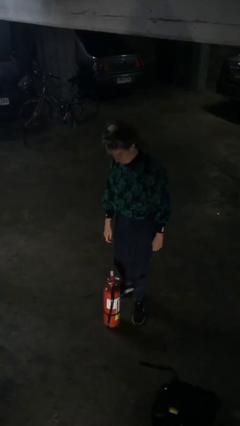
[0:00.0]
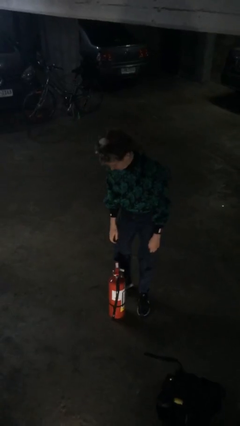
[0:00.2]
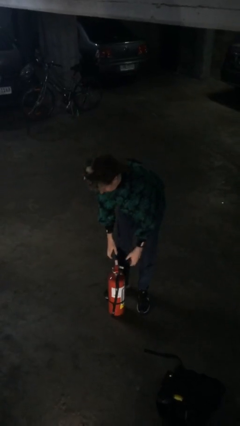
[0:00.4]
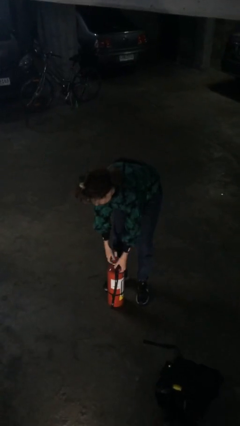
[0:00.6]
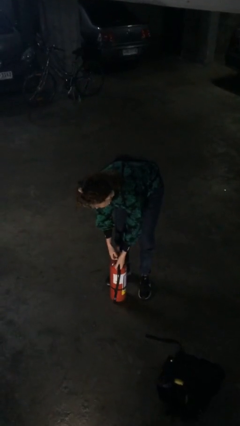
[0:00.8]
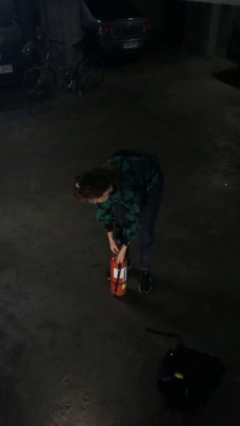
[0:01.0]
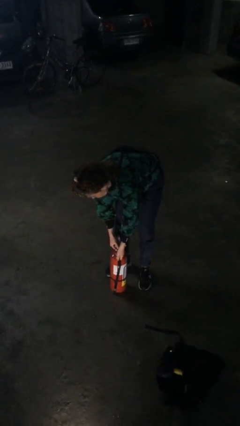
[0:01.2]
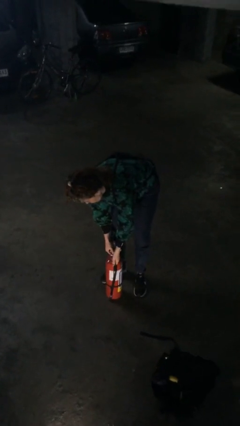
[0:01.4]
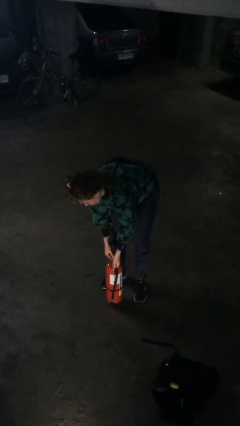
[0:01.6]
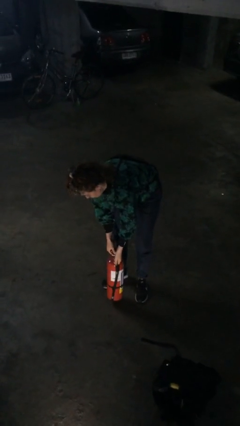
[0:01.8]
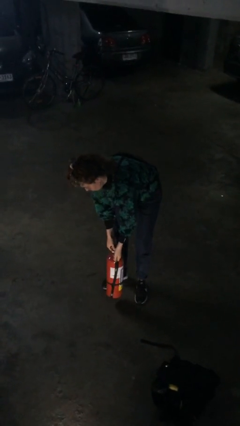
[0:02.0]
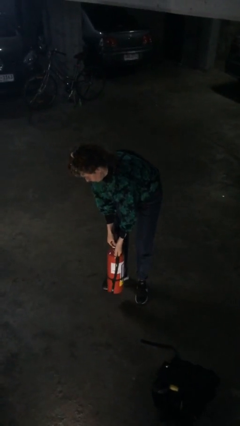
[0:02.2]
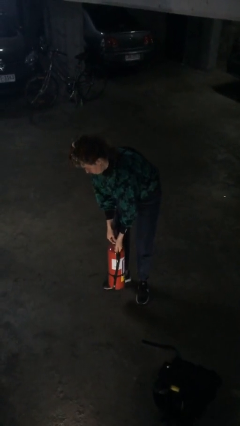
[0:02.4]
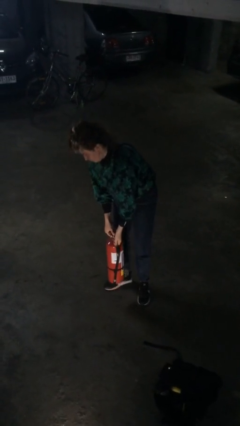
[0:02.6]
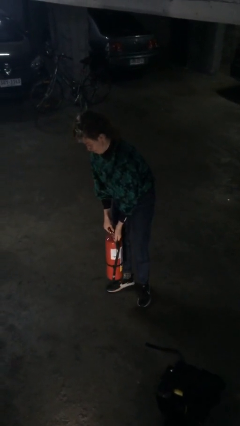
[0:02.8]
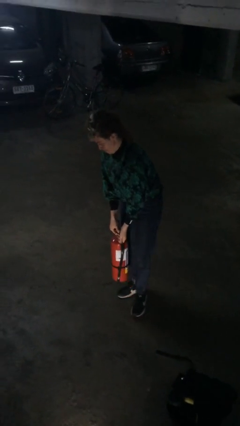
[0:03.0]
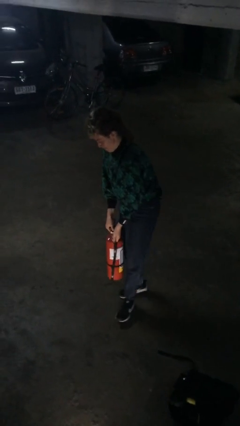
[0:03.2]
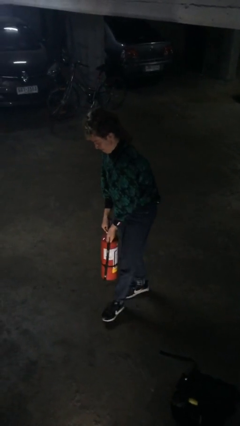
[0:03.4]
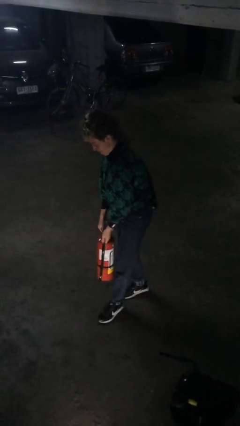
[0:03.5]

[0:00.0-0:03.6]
person picks up object from floor

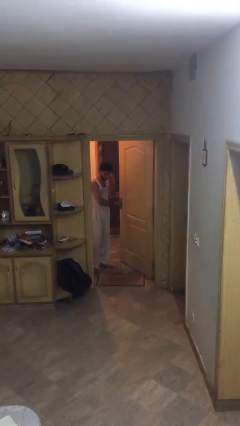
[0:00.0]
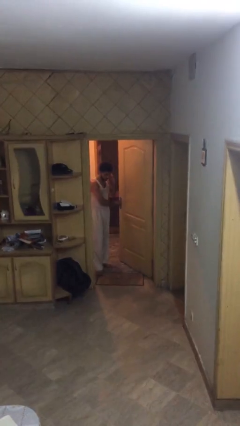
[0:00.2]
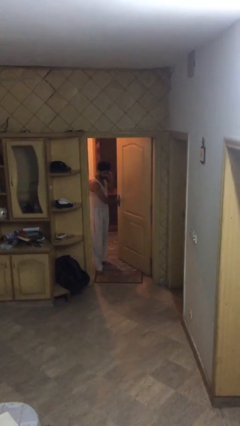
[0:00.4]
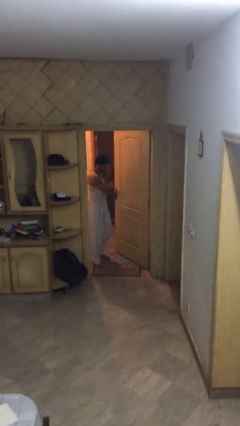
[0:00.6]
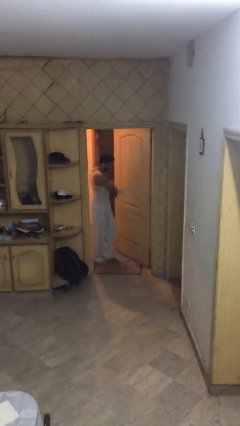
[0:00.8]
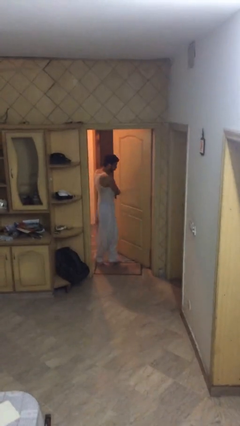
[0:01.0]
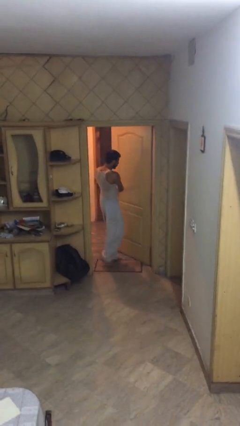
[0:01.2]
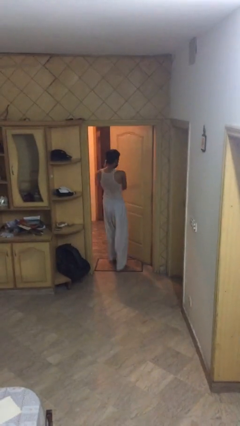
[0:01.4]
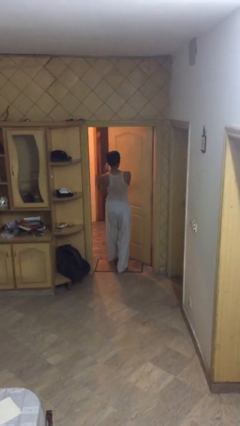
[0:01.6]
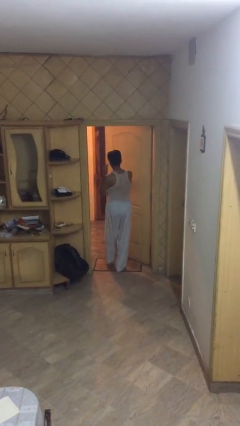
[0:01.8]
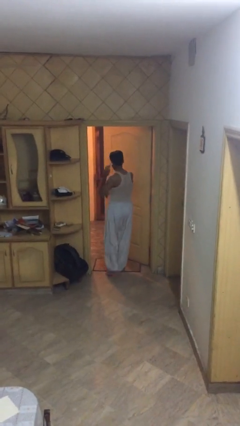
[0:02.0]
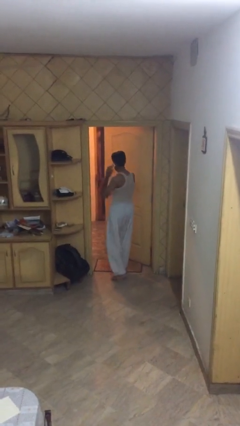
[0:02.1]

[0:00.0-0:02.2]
person enters scene through structure

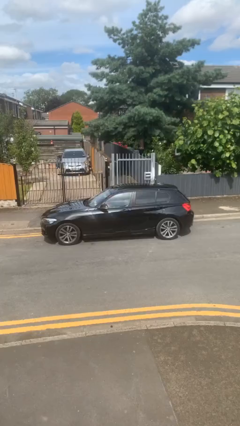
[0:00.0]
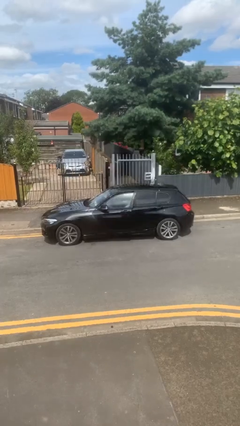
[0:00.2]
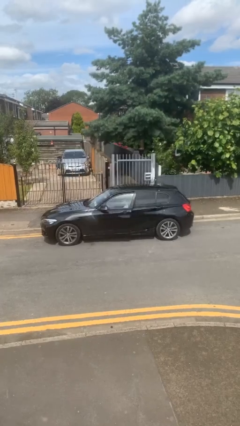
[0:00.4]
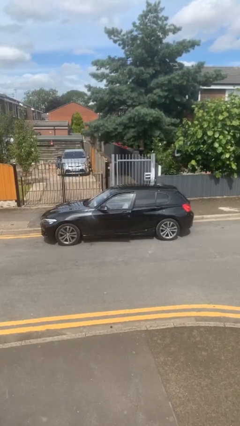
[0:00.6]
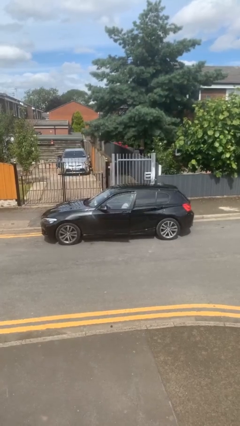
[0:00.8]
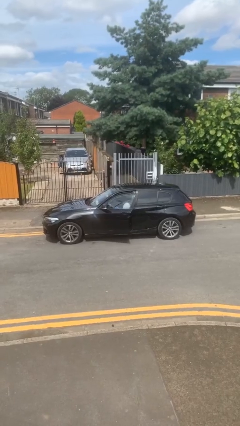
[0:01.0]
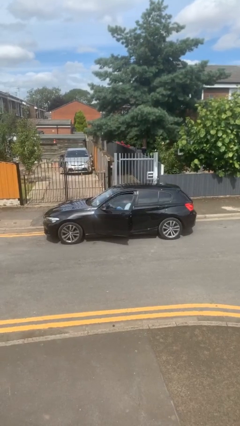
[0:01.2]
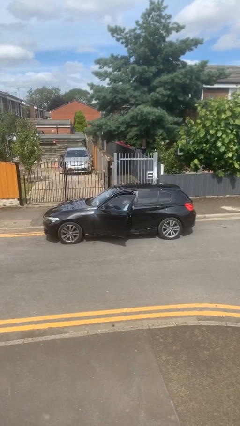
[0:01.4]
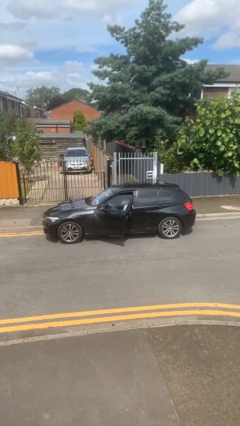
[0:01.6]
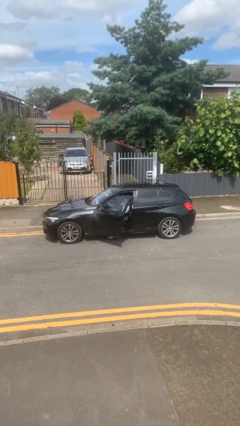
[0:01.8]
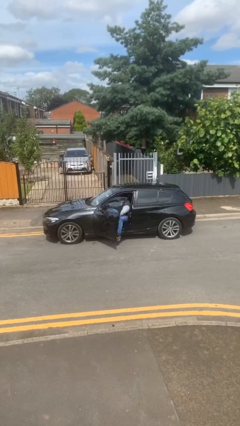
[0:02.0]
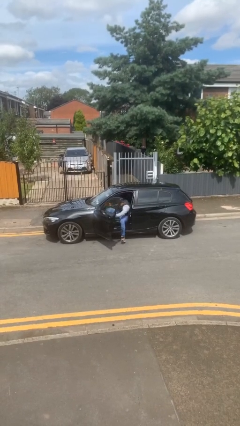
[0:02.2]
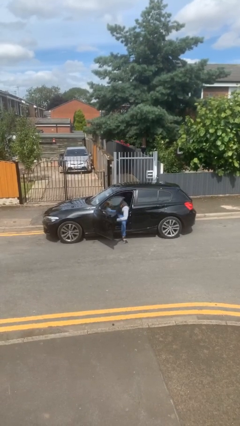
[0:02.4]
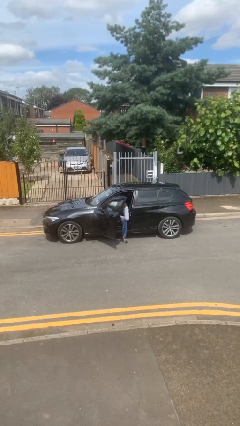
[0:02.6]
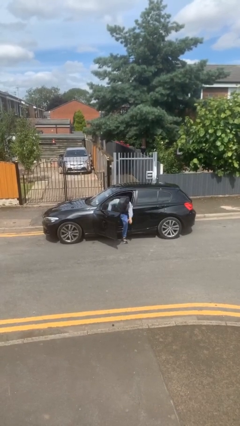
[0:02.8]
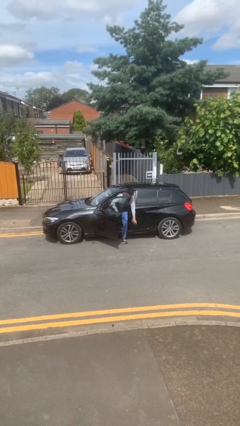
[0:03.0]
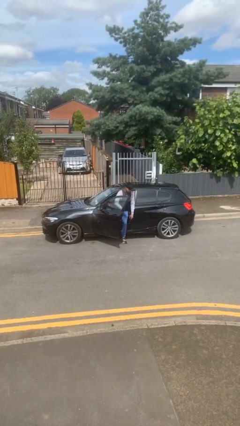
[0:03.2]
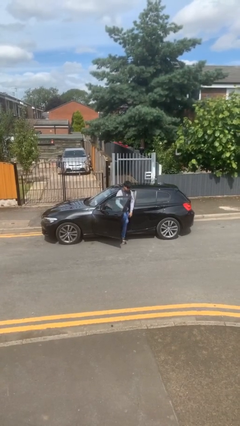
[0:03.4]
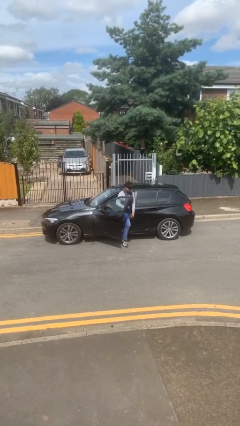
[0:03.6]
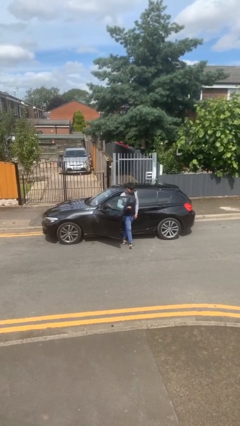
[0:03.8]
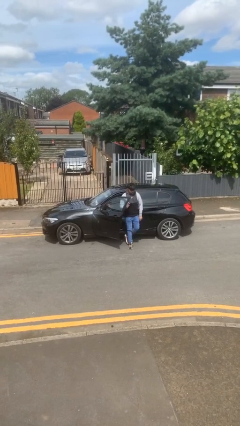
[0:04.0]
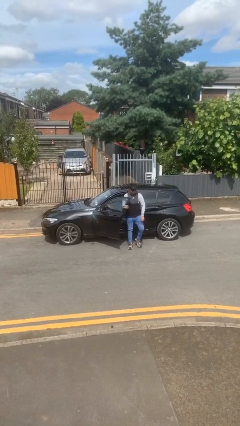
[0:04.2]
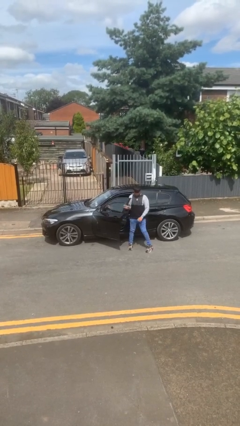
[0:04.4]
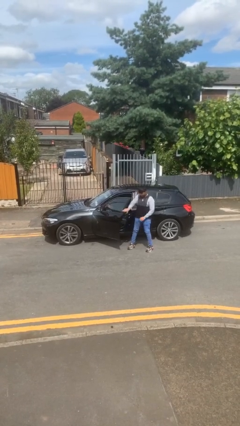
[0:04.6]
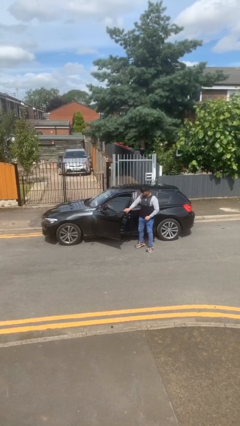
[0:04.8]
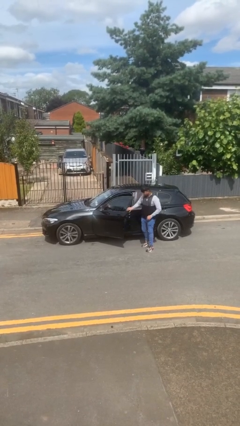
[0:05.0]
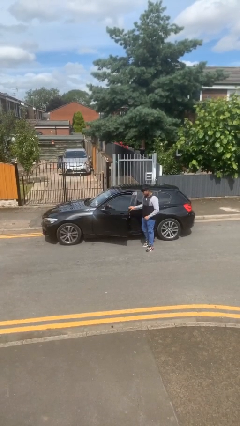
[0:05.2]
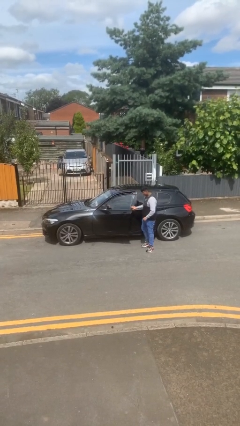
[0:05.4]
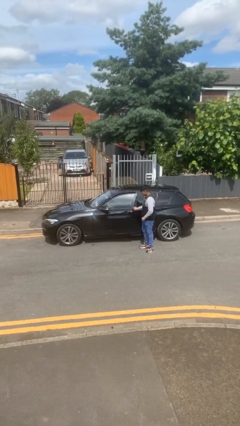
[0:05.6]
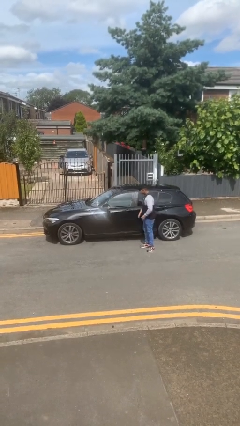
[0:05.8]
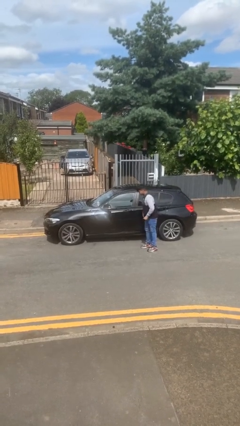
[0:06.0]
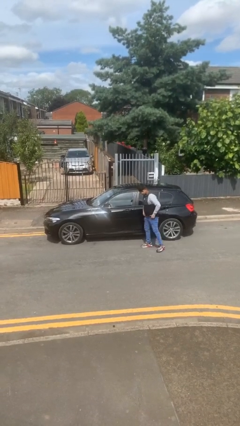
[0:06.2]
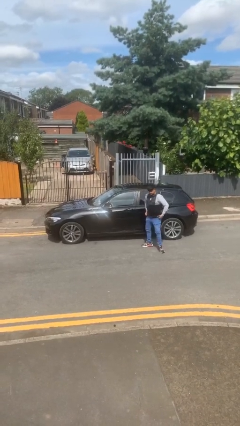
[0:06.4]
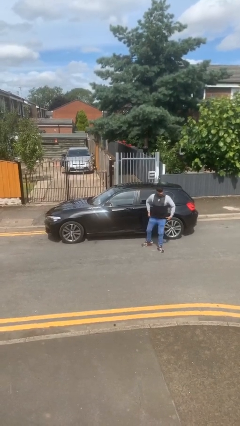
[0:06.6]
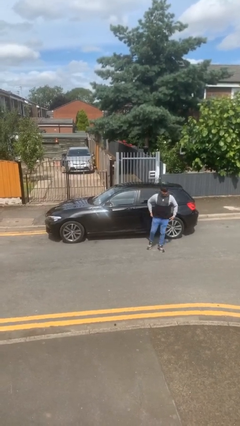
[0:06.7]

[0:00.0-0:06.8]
car drops off person

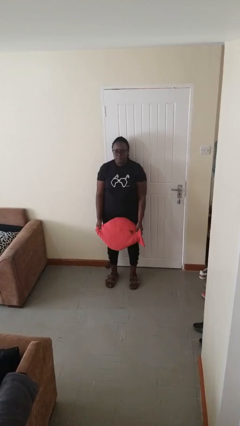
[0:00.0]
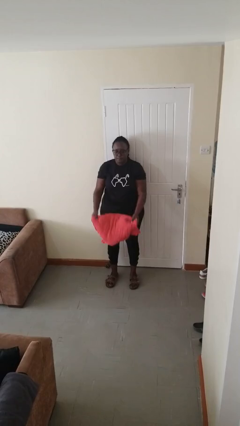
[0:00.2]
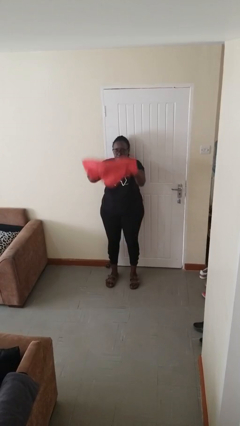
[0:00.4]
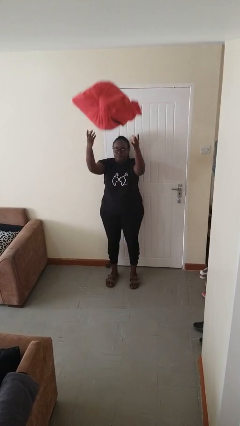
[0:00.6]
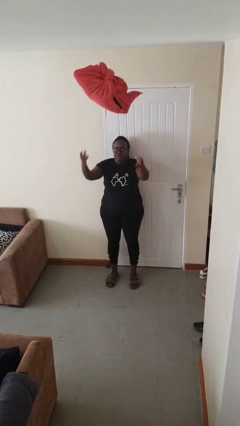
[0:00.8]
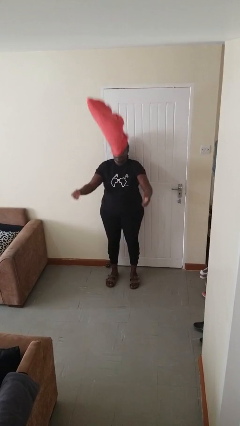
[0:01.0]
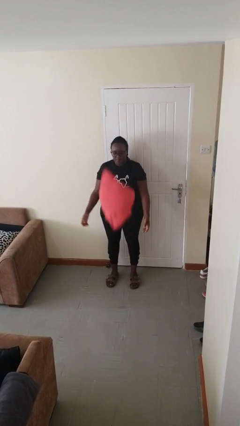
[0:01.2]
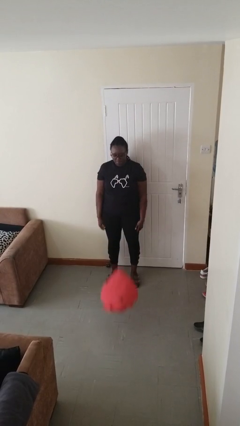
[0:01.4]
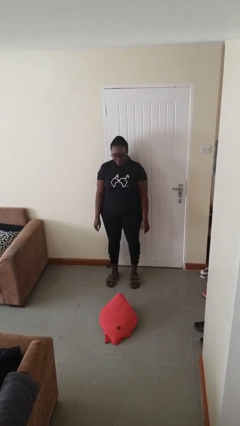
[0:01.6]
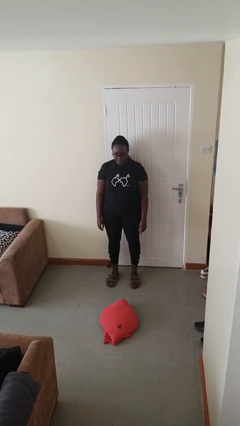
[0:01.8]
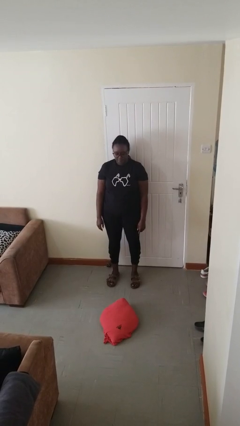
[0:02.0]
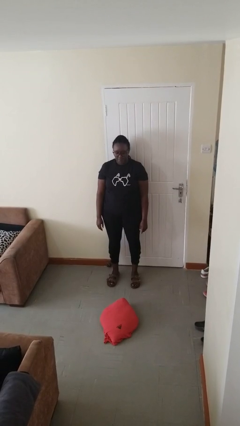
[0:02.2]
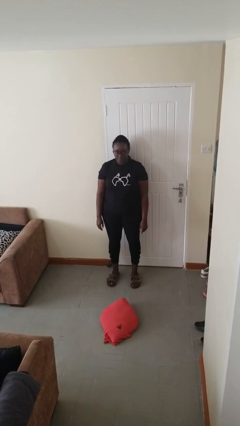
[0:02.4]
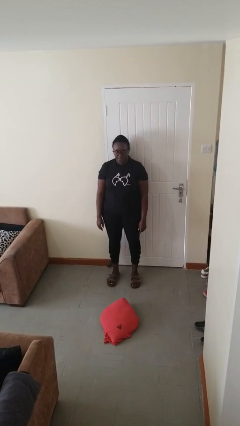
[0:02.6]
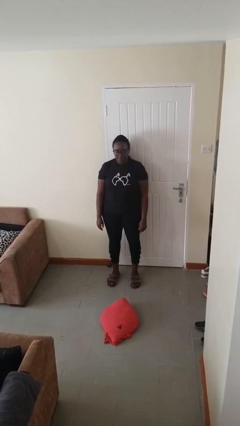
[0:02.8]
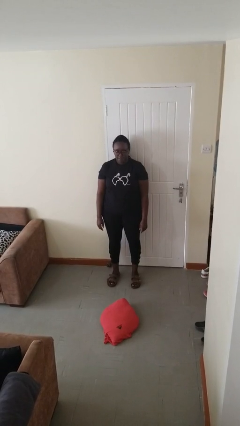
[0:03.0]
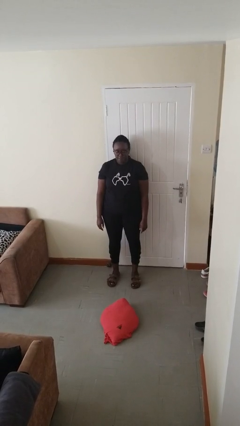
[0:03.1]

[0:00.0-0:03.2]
person throws object into air

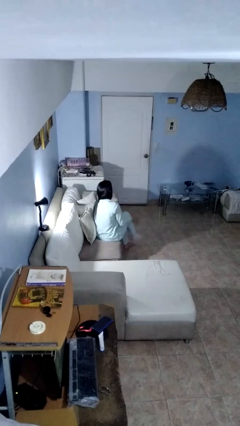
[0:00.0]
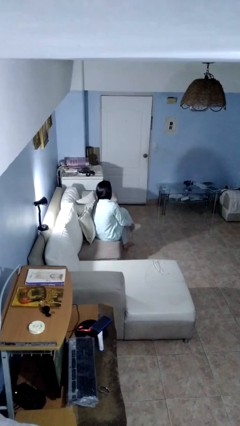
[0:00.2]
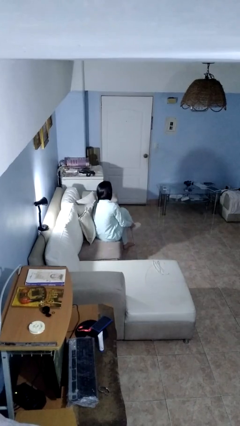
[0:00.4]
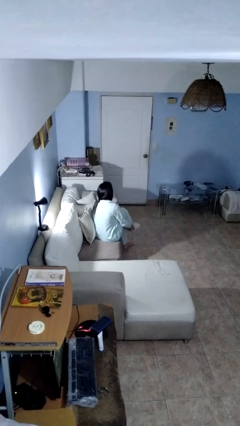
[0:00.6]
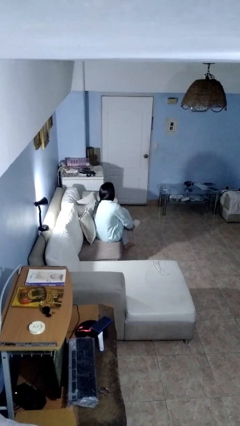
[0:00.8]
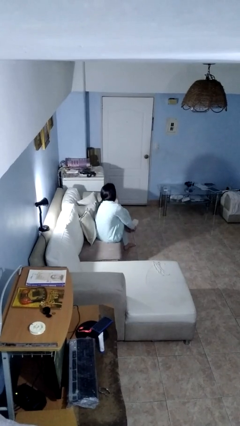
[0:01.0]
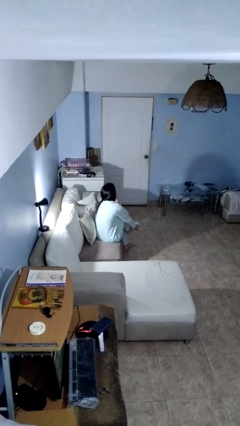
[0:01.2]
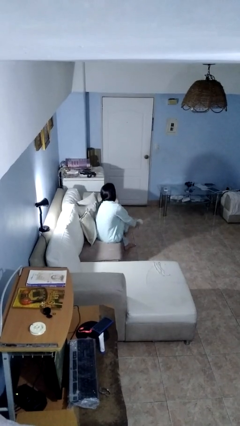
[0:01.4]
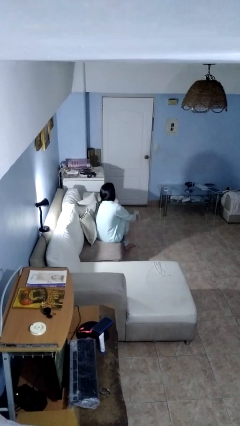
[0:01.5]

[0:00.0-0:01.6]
person takes off socks

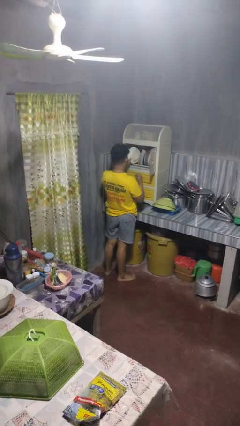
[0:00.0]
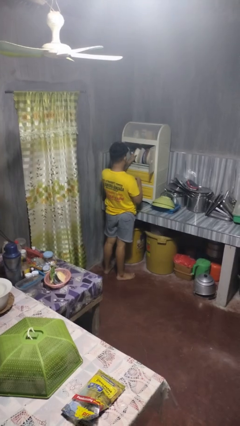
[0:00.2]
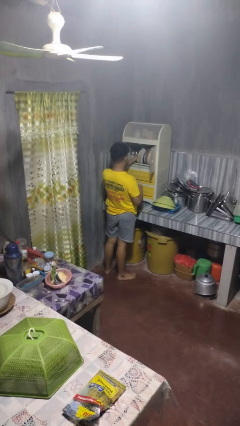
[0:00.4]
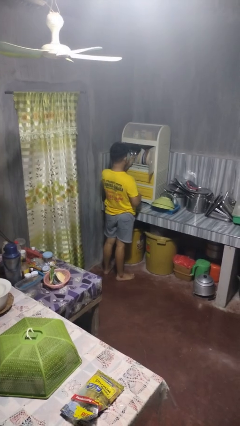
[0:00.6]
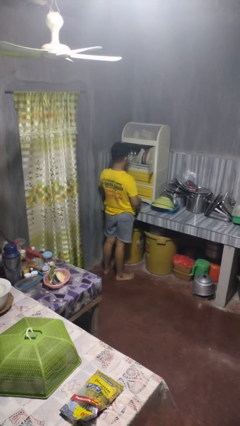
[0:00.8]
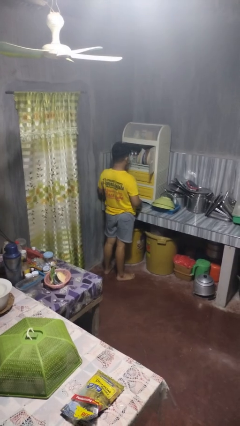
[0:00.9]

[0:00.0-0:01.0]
person puts object in cabinet
